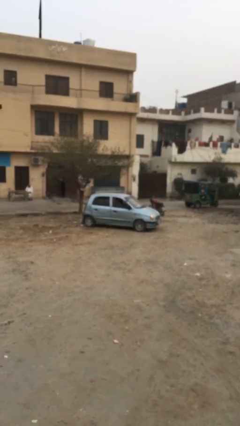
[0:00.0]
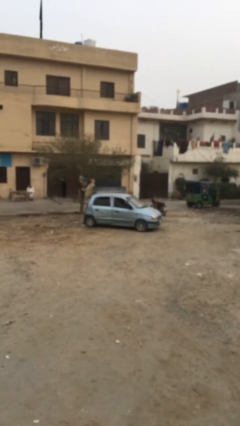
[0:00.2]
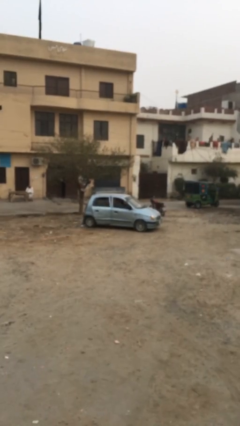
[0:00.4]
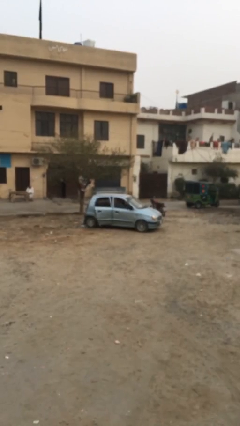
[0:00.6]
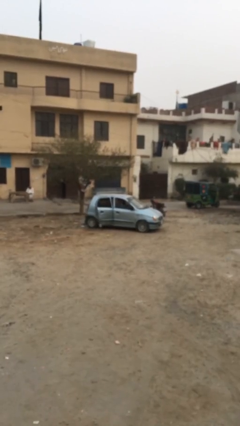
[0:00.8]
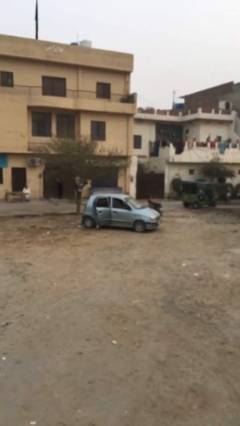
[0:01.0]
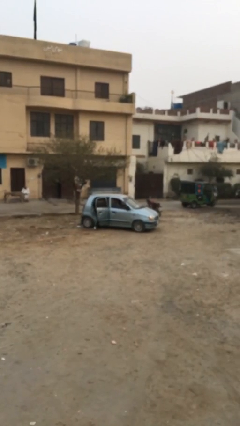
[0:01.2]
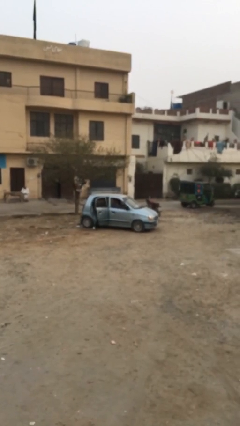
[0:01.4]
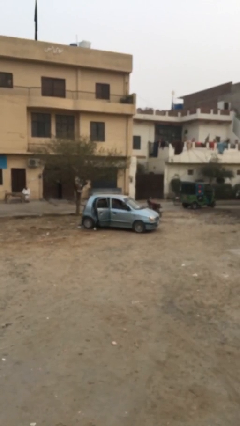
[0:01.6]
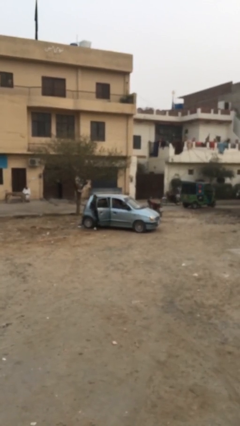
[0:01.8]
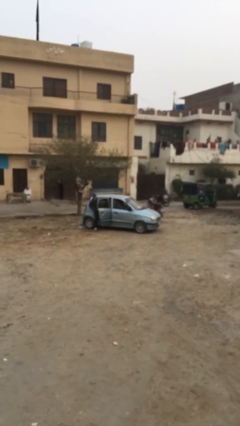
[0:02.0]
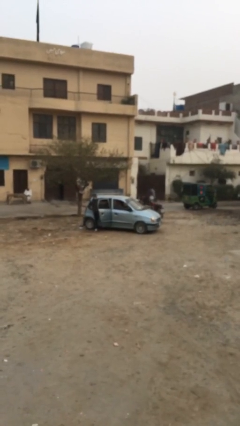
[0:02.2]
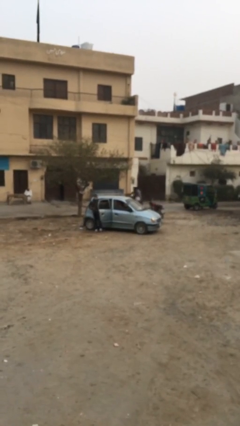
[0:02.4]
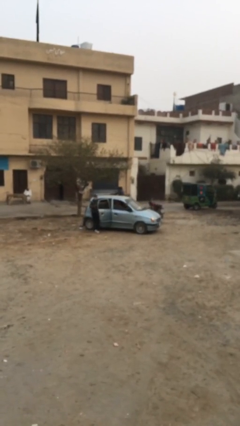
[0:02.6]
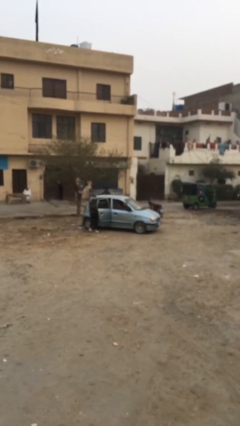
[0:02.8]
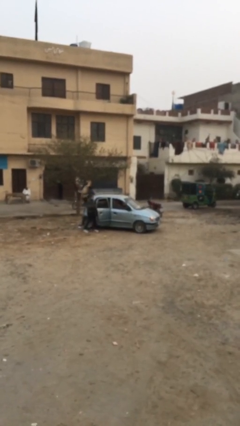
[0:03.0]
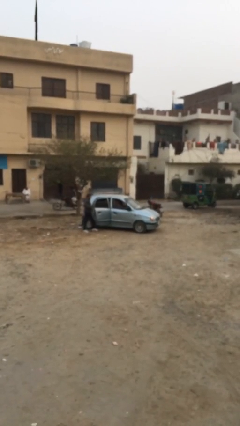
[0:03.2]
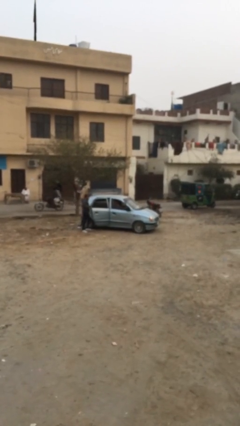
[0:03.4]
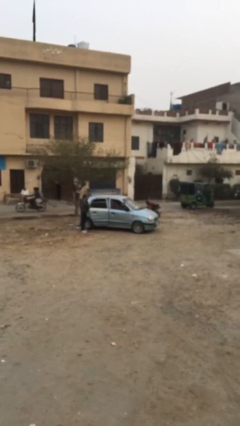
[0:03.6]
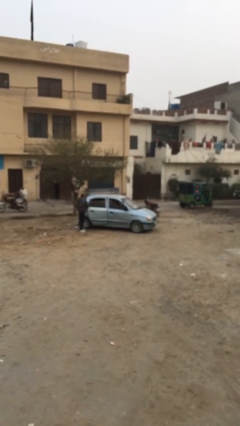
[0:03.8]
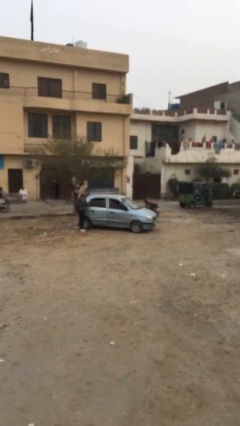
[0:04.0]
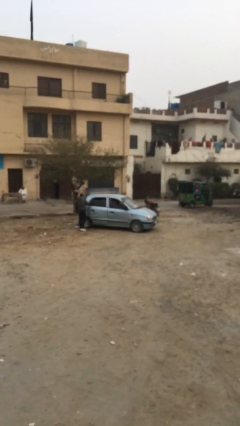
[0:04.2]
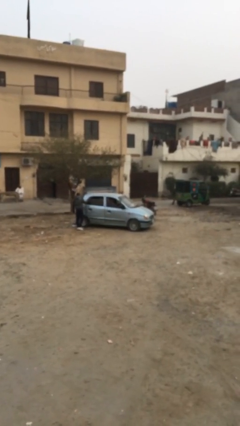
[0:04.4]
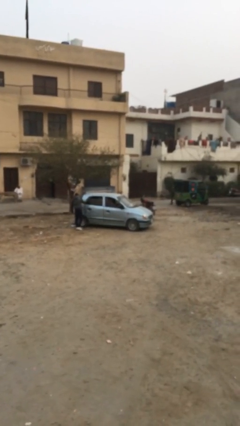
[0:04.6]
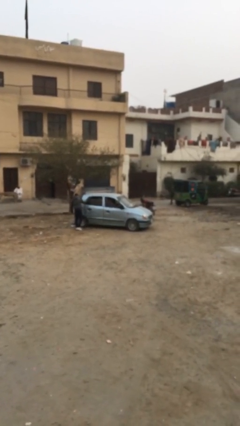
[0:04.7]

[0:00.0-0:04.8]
car drops off person

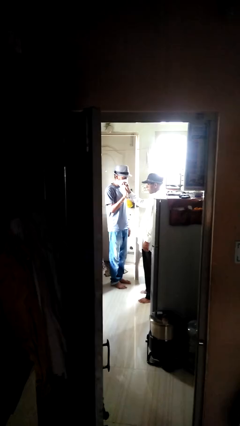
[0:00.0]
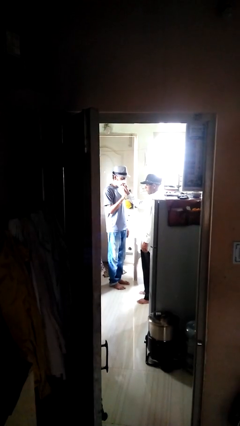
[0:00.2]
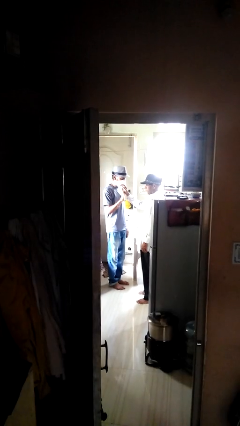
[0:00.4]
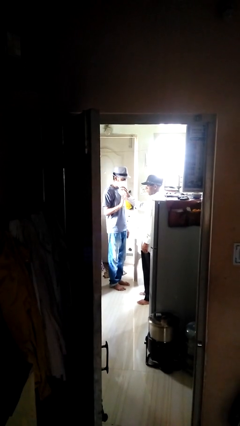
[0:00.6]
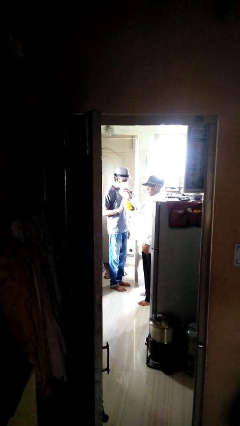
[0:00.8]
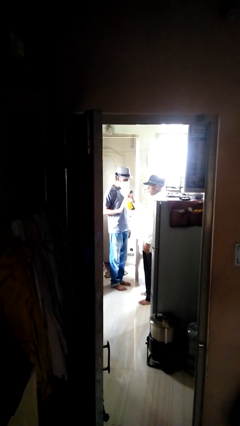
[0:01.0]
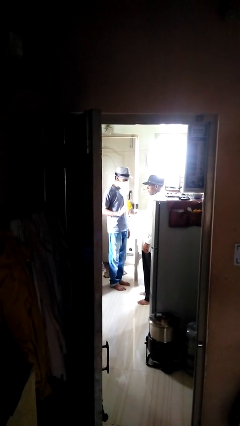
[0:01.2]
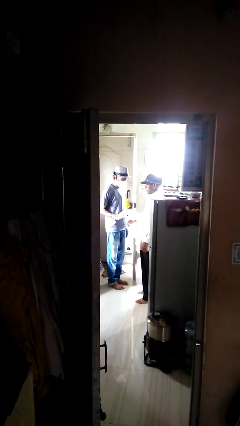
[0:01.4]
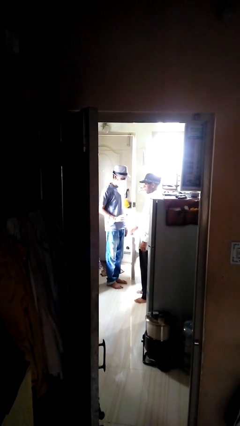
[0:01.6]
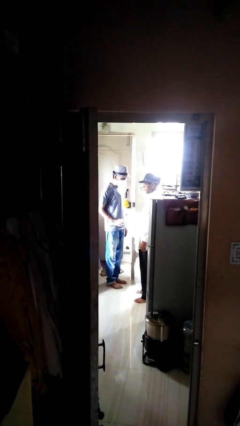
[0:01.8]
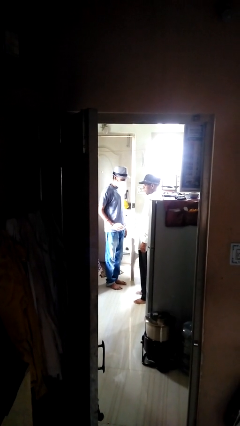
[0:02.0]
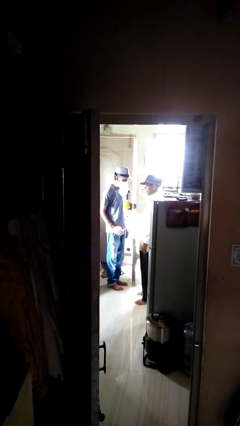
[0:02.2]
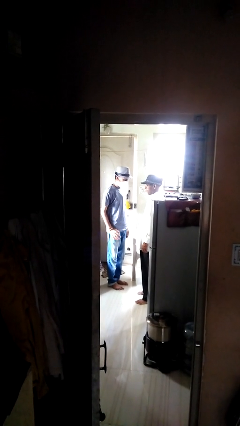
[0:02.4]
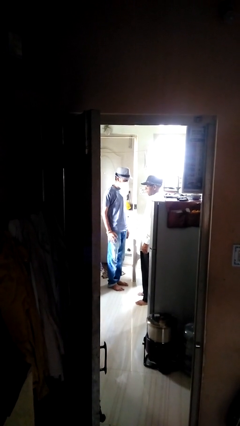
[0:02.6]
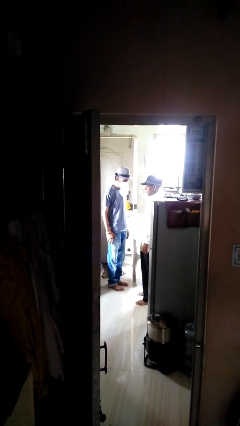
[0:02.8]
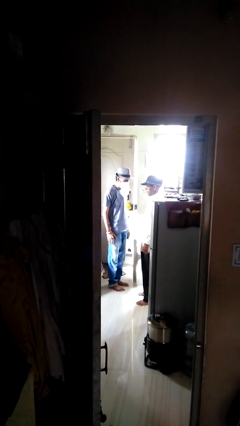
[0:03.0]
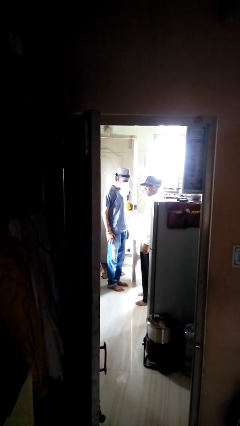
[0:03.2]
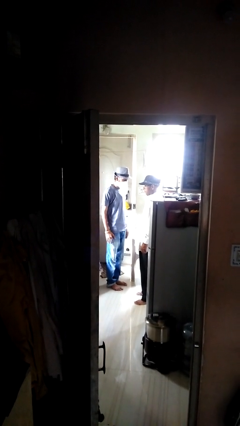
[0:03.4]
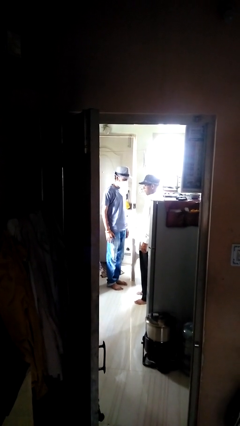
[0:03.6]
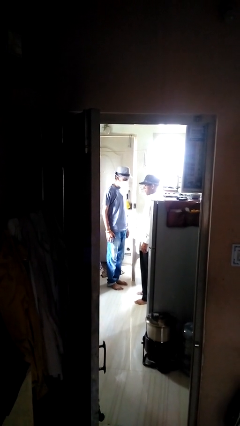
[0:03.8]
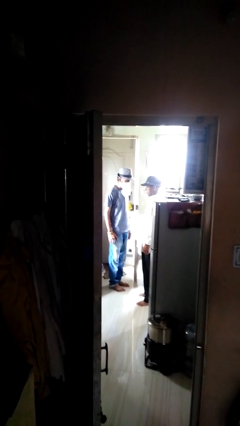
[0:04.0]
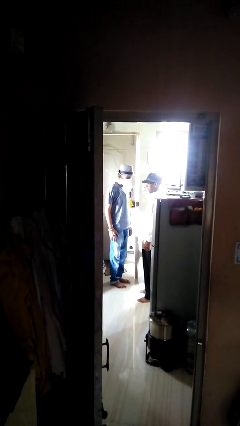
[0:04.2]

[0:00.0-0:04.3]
person highfives hand

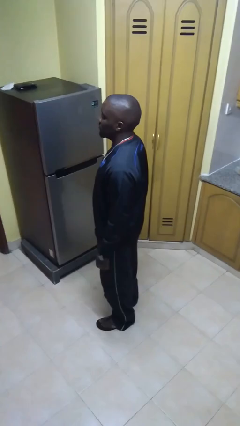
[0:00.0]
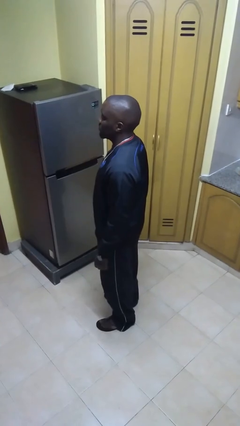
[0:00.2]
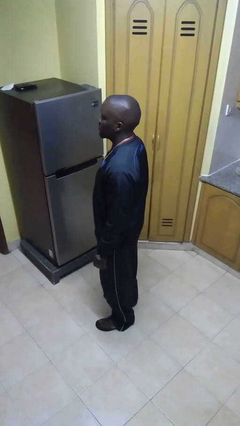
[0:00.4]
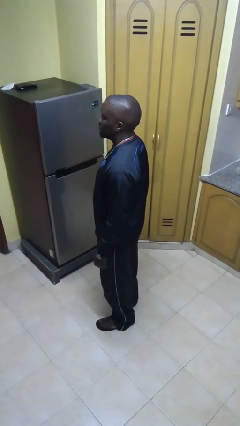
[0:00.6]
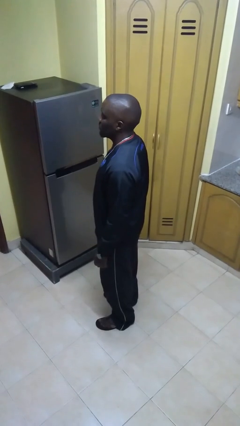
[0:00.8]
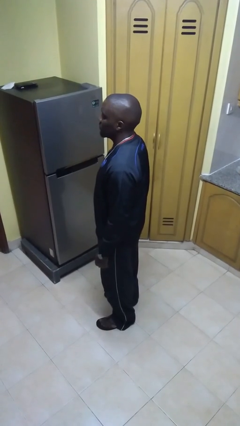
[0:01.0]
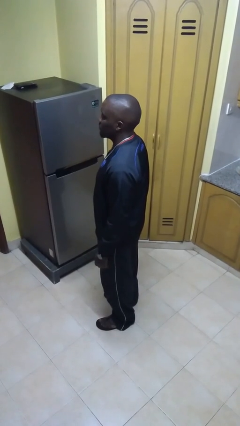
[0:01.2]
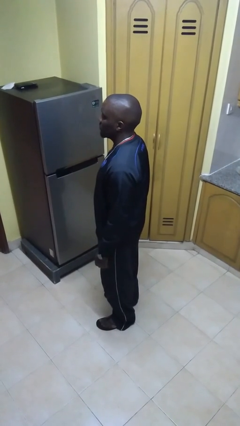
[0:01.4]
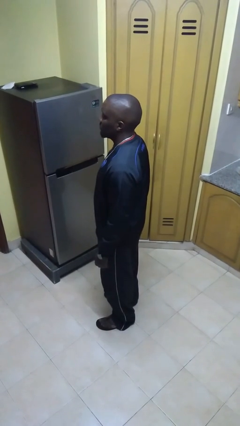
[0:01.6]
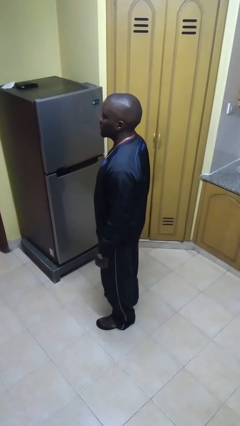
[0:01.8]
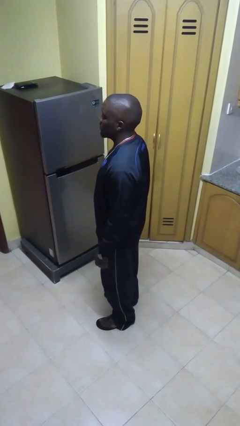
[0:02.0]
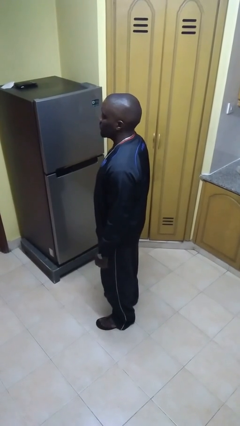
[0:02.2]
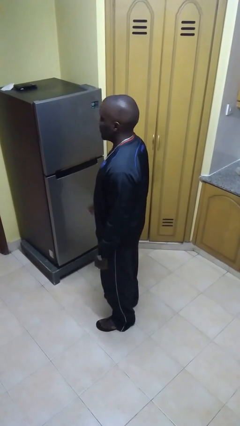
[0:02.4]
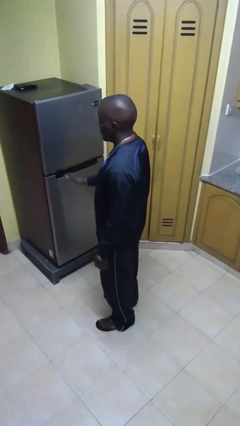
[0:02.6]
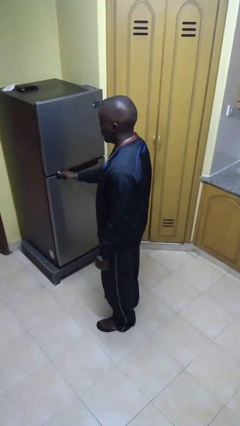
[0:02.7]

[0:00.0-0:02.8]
person washes hands

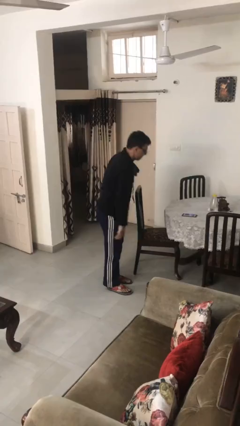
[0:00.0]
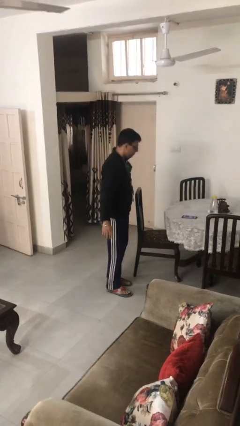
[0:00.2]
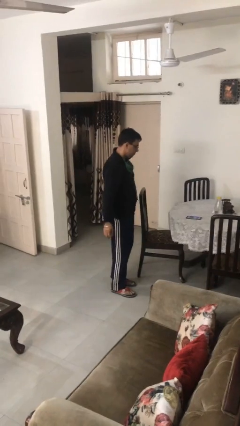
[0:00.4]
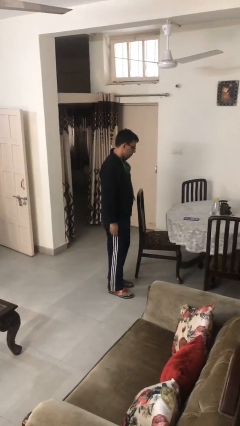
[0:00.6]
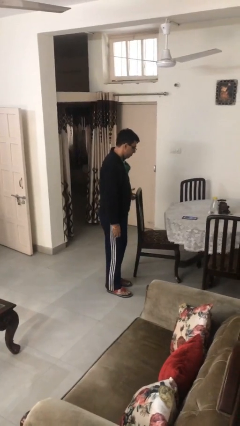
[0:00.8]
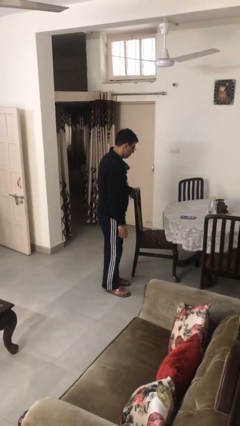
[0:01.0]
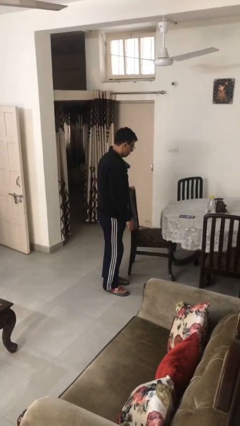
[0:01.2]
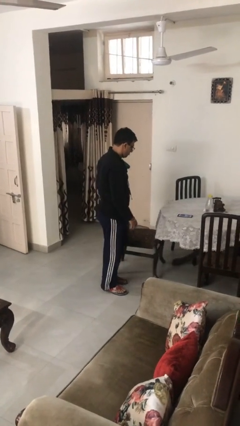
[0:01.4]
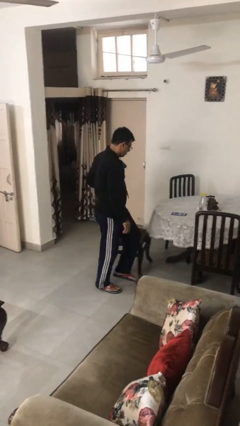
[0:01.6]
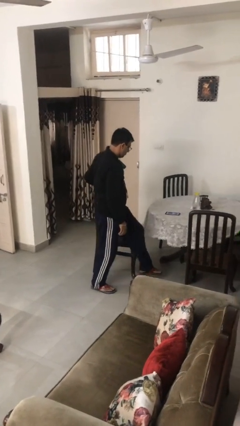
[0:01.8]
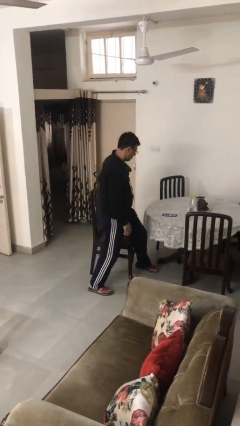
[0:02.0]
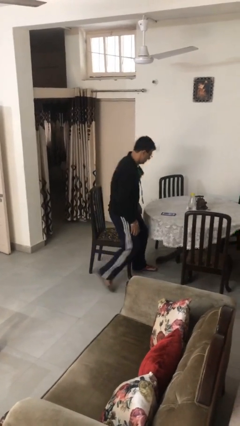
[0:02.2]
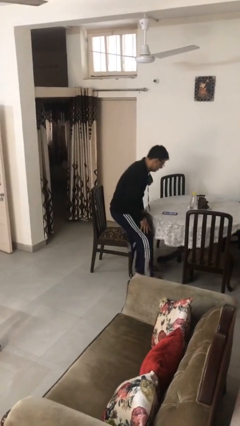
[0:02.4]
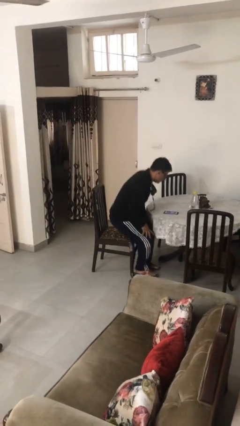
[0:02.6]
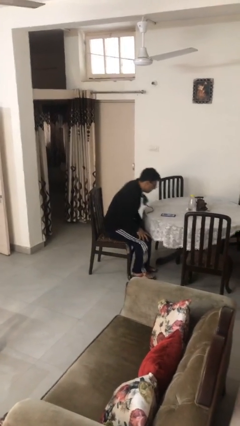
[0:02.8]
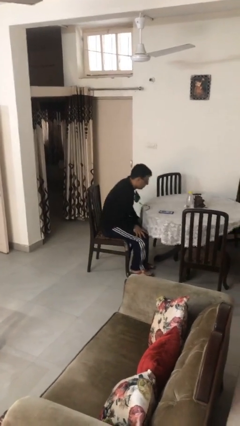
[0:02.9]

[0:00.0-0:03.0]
person sits down

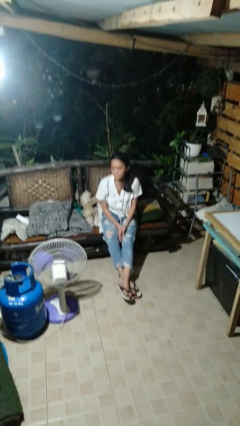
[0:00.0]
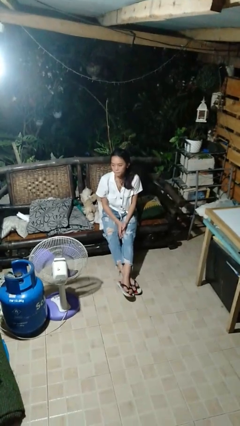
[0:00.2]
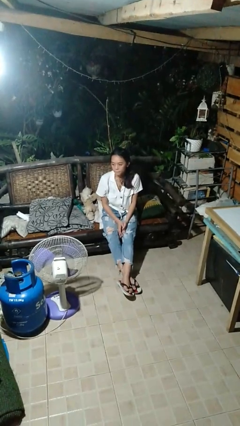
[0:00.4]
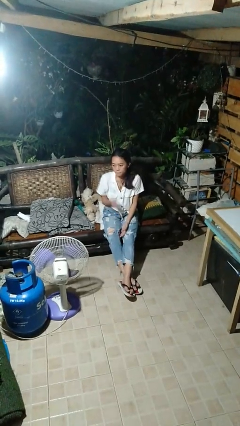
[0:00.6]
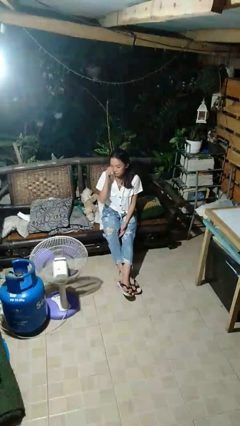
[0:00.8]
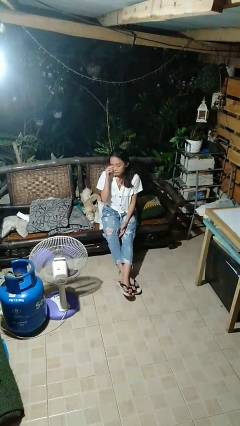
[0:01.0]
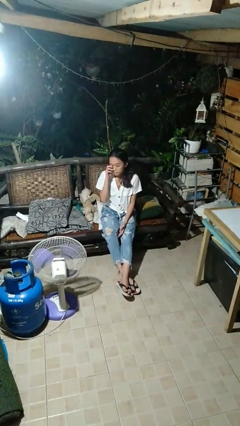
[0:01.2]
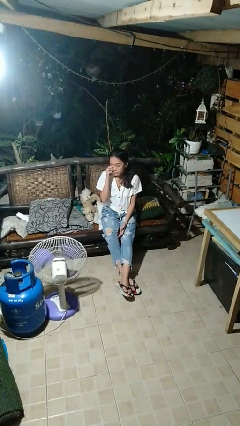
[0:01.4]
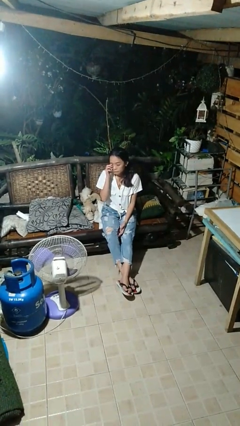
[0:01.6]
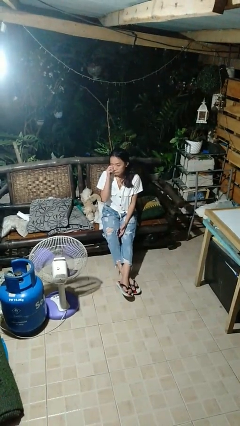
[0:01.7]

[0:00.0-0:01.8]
person rubs eyes

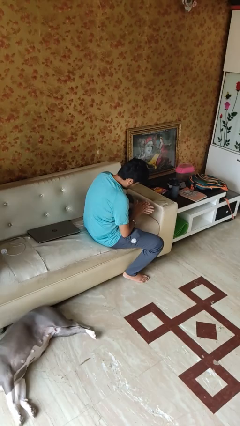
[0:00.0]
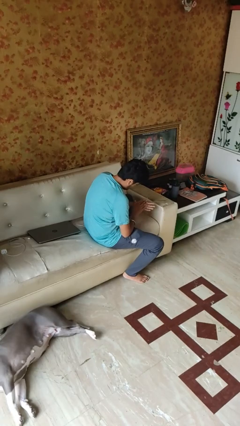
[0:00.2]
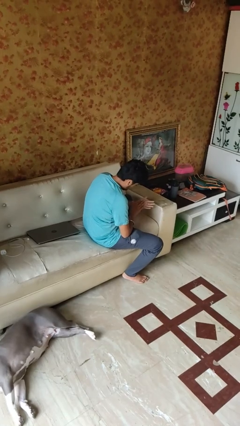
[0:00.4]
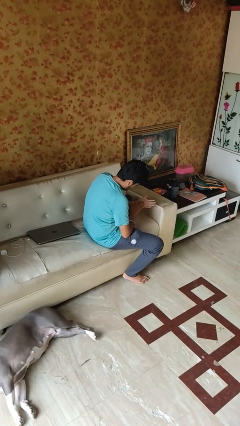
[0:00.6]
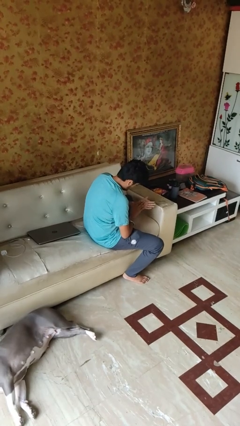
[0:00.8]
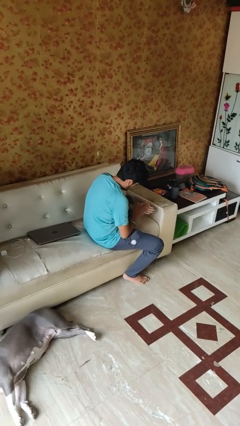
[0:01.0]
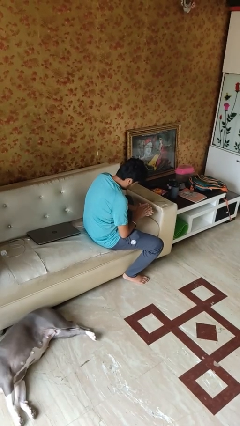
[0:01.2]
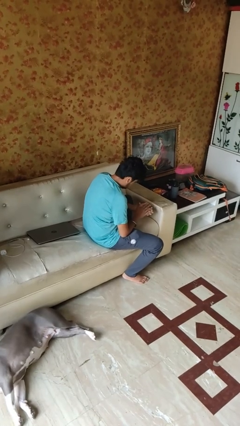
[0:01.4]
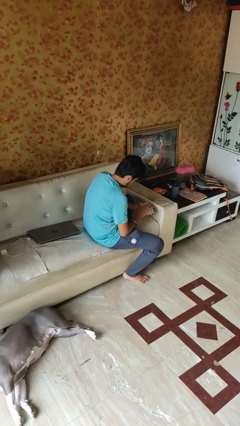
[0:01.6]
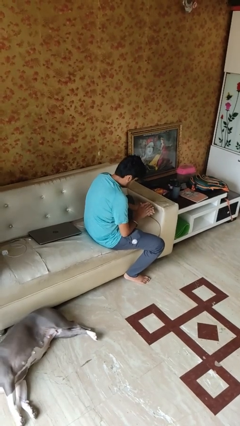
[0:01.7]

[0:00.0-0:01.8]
person looks at hands in lap
